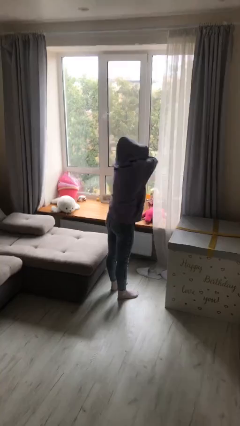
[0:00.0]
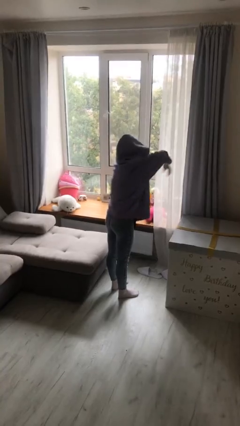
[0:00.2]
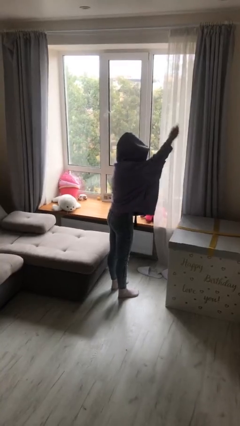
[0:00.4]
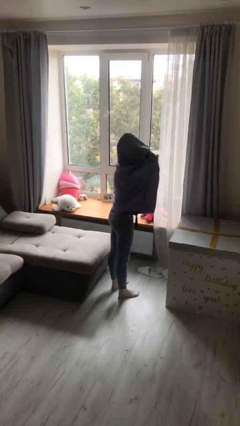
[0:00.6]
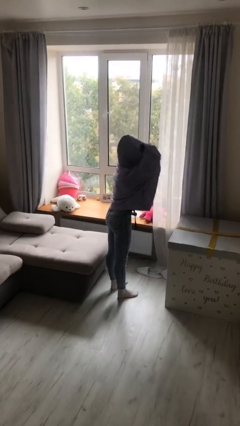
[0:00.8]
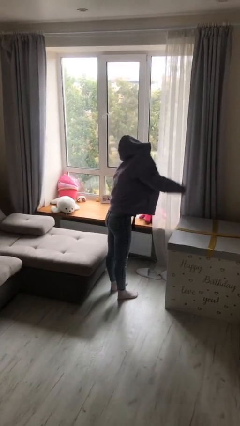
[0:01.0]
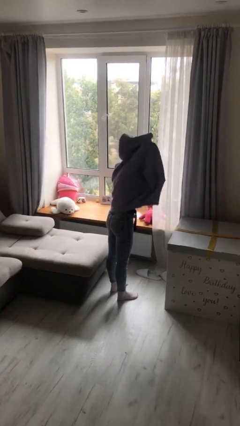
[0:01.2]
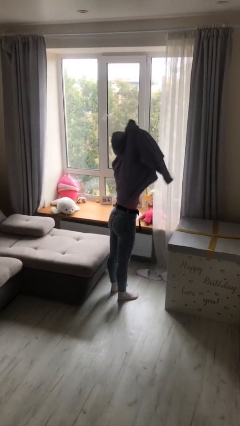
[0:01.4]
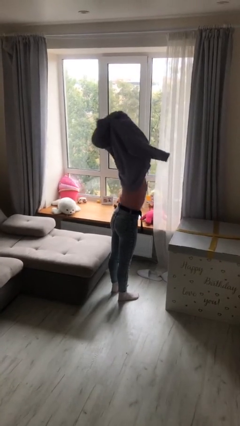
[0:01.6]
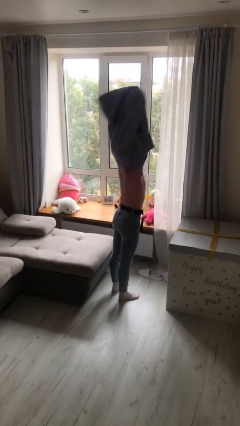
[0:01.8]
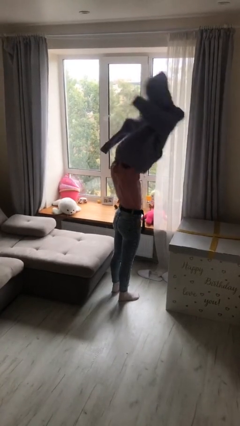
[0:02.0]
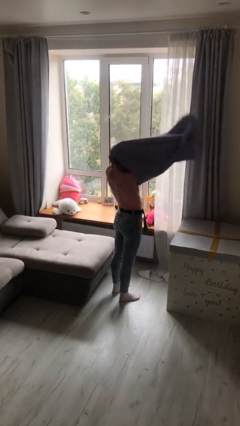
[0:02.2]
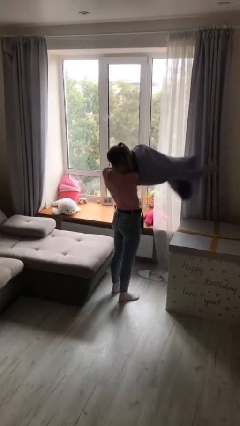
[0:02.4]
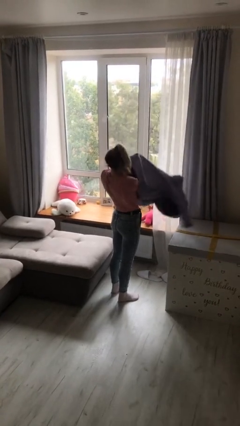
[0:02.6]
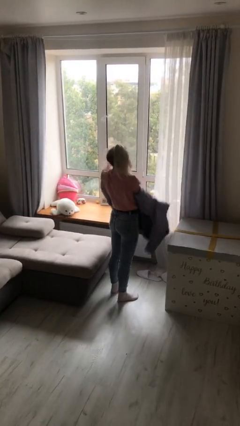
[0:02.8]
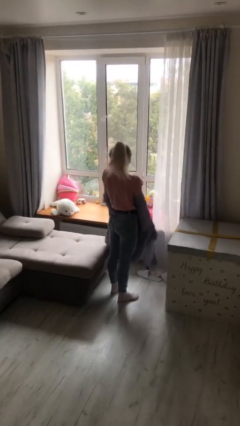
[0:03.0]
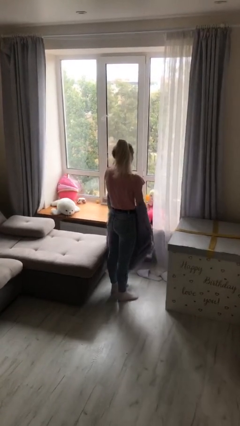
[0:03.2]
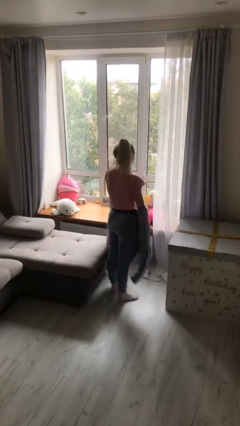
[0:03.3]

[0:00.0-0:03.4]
person takes off hoodie

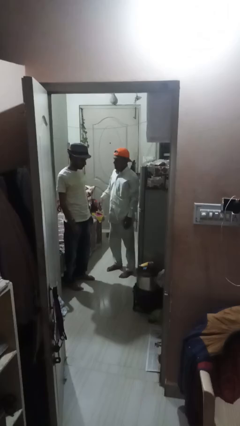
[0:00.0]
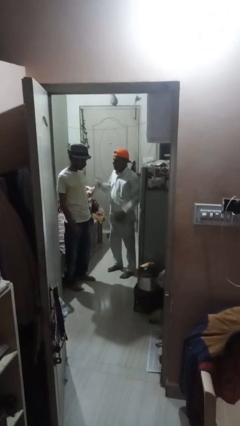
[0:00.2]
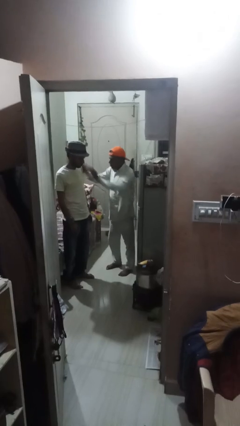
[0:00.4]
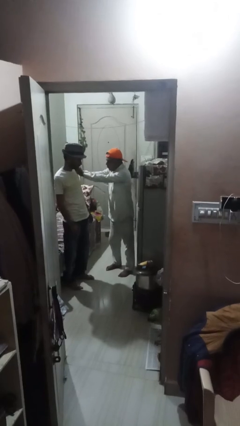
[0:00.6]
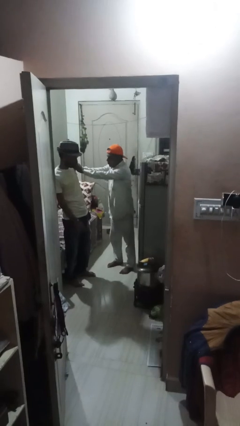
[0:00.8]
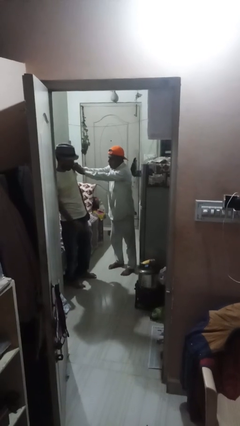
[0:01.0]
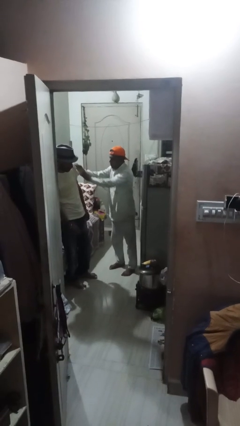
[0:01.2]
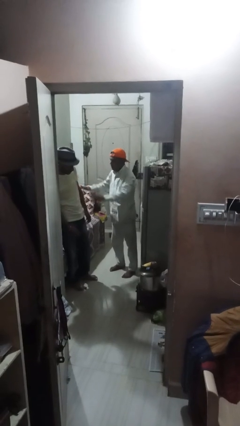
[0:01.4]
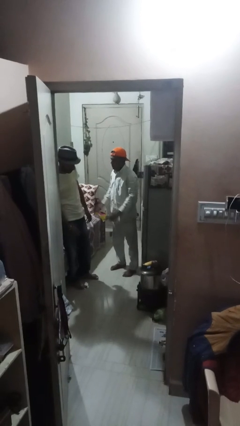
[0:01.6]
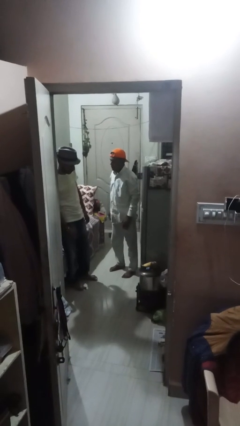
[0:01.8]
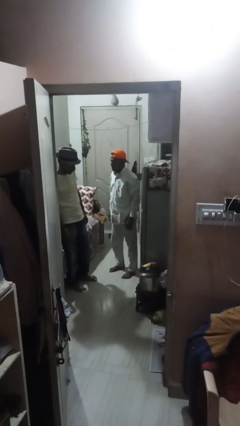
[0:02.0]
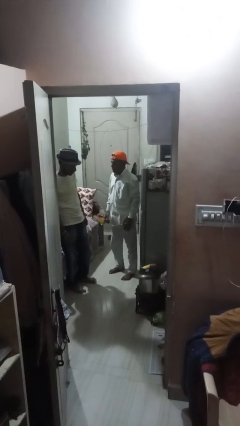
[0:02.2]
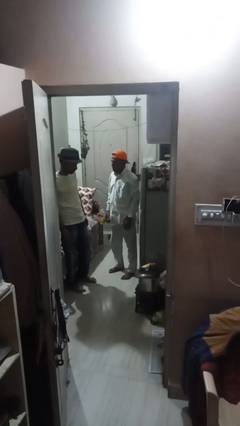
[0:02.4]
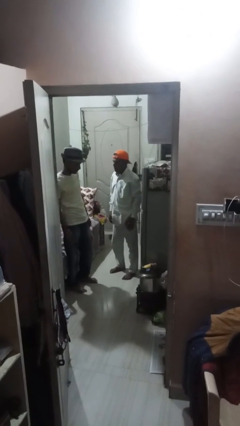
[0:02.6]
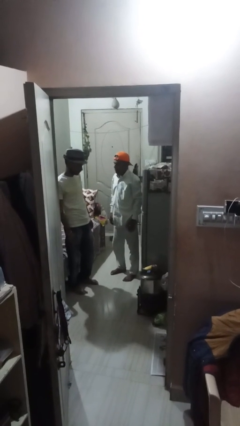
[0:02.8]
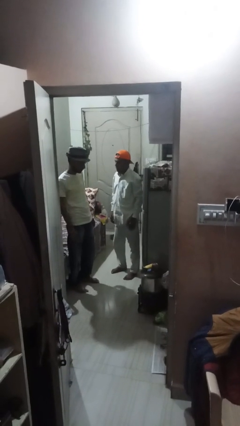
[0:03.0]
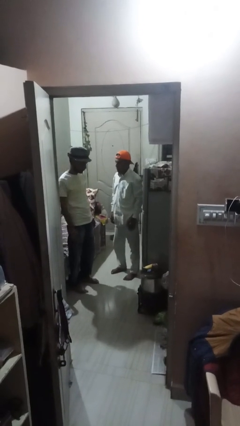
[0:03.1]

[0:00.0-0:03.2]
person shoves person

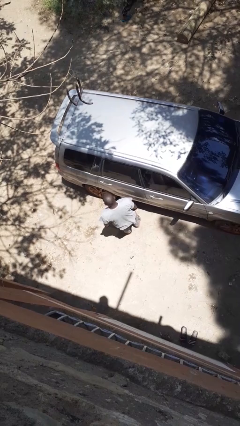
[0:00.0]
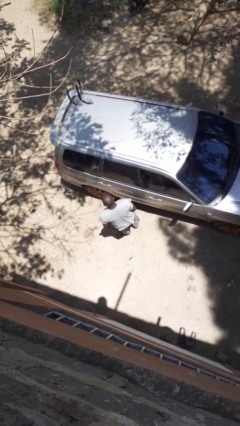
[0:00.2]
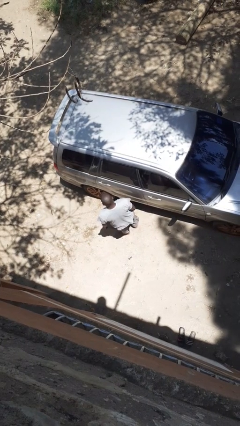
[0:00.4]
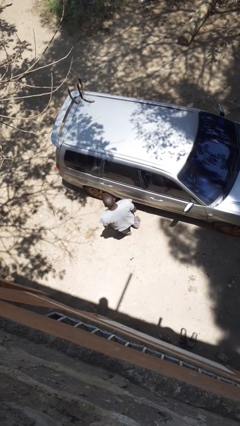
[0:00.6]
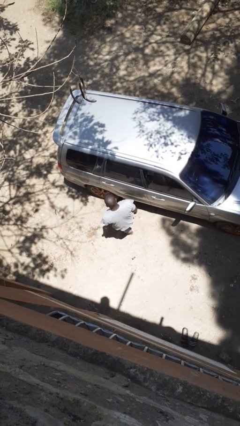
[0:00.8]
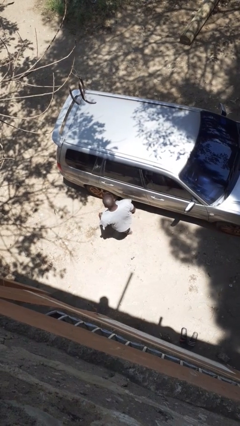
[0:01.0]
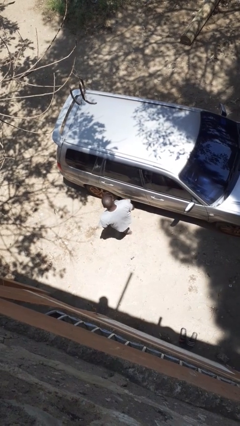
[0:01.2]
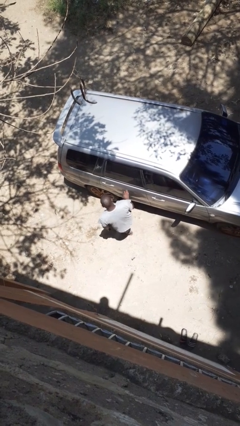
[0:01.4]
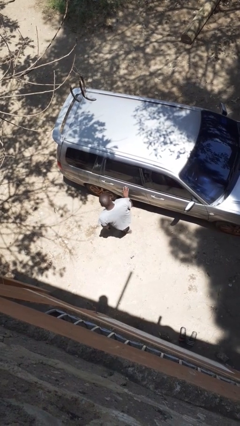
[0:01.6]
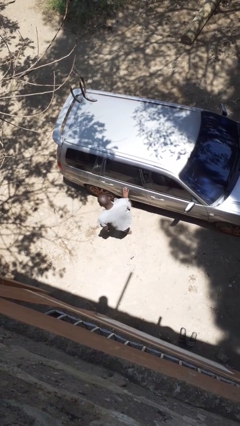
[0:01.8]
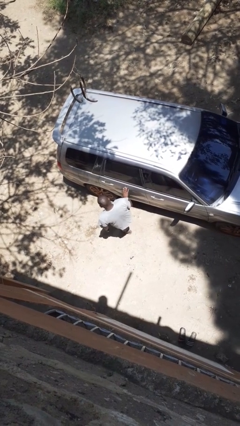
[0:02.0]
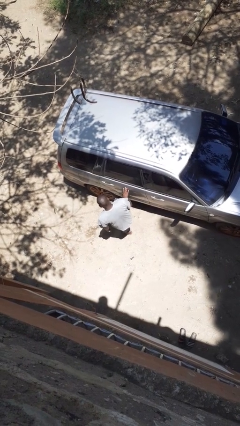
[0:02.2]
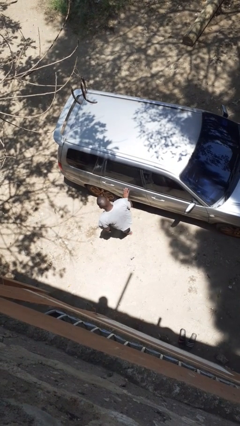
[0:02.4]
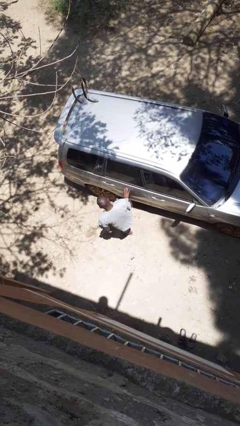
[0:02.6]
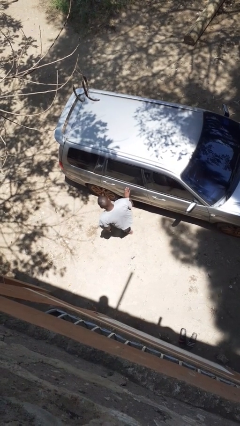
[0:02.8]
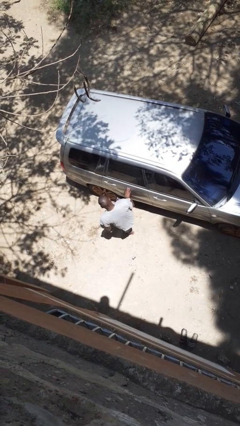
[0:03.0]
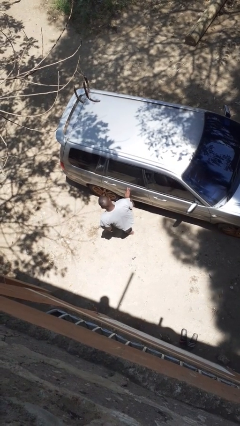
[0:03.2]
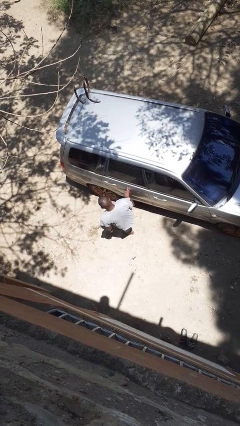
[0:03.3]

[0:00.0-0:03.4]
person kicks car tires

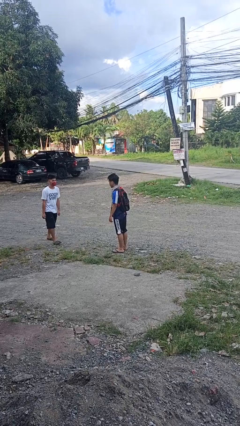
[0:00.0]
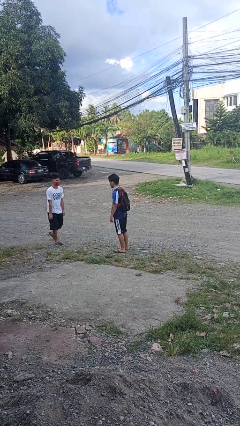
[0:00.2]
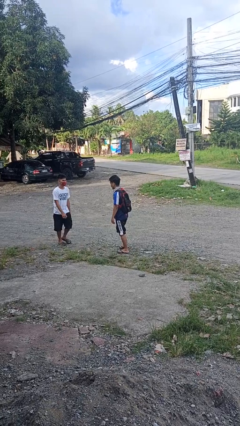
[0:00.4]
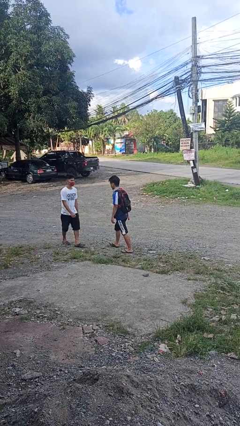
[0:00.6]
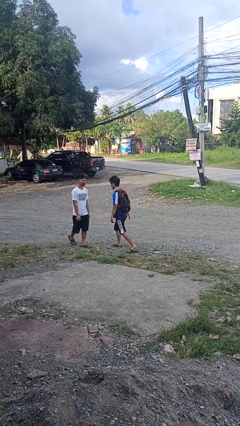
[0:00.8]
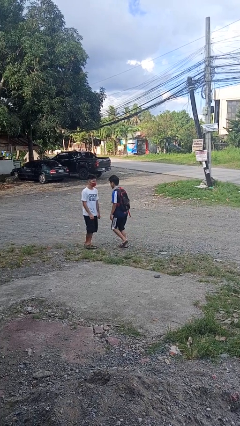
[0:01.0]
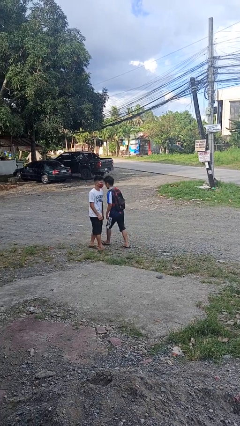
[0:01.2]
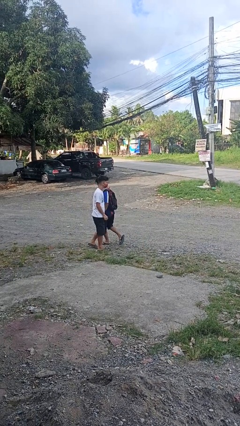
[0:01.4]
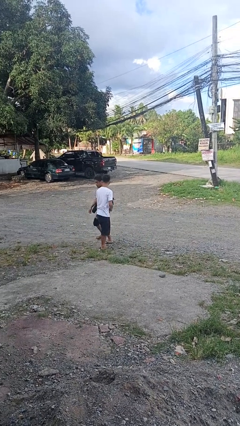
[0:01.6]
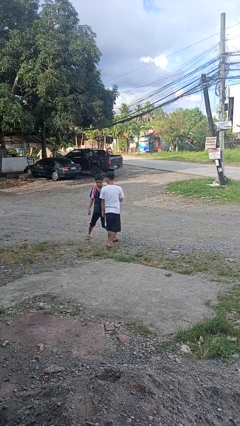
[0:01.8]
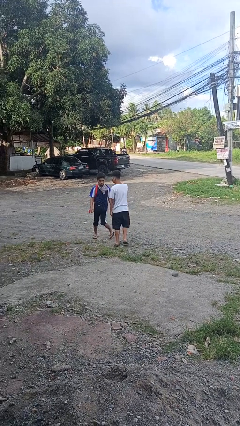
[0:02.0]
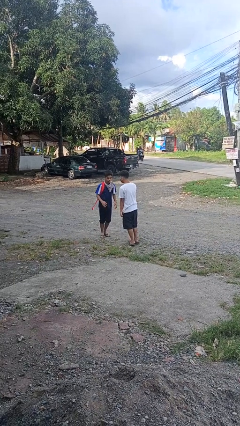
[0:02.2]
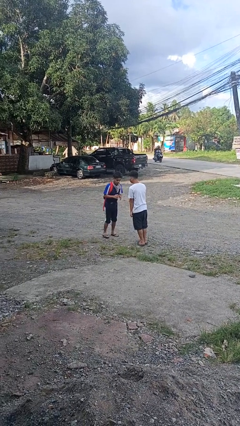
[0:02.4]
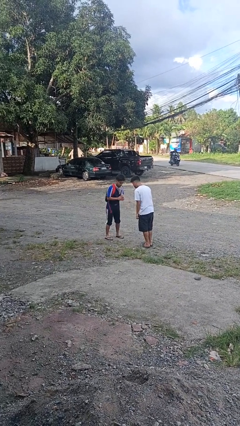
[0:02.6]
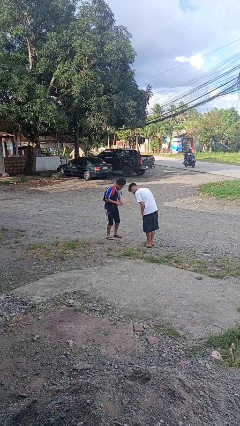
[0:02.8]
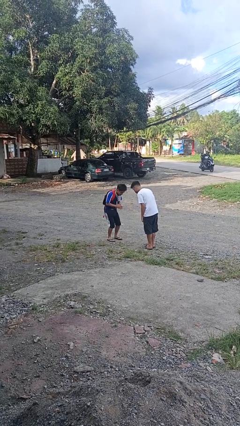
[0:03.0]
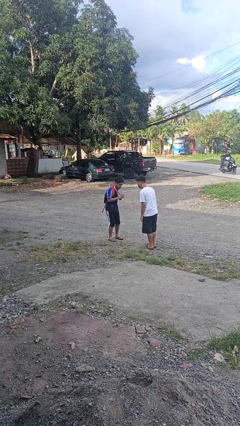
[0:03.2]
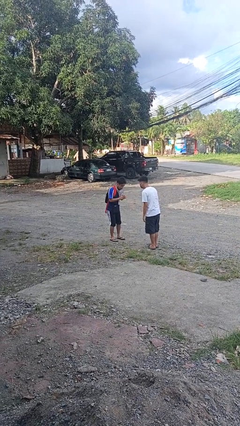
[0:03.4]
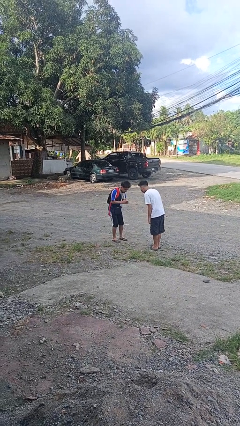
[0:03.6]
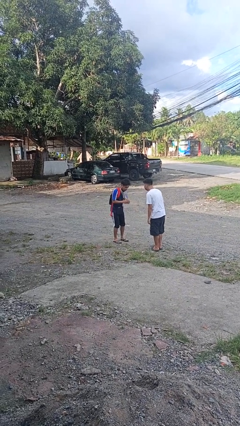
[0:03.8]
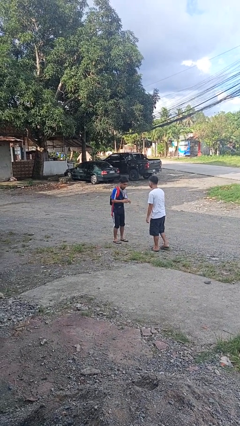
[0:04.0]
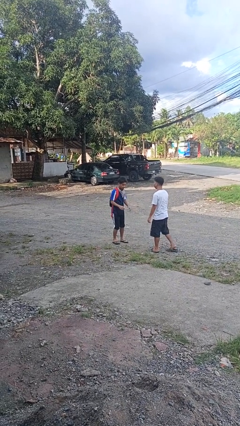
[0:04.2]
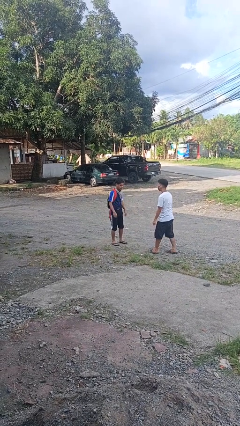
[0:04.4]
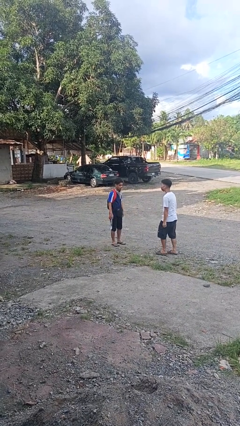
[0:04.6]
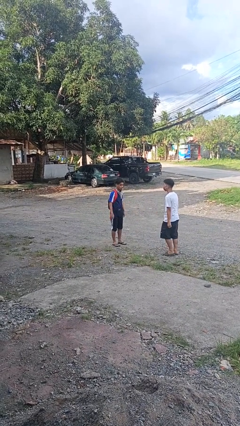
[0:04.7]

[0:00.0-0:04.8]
person bumps into person

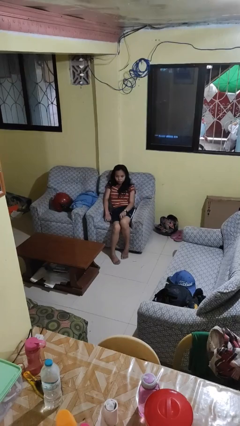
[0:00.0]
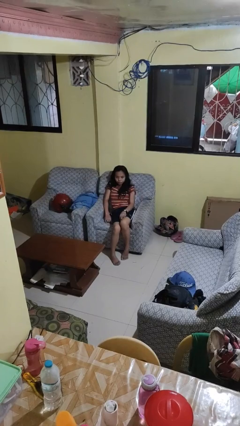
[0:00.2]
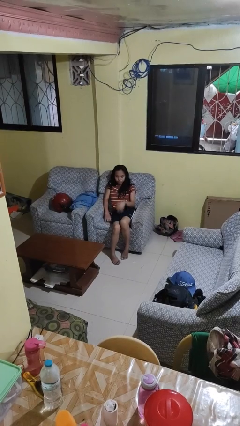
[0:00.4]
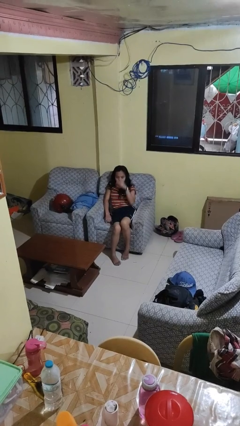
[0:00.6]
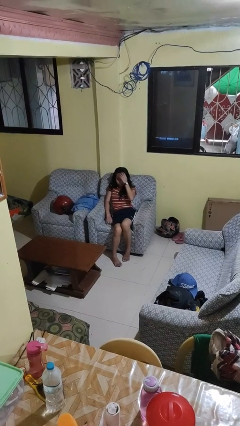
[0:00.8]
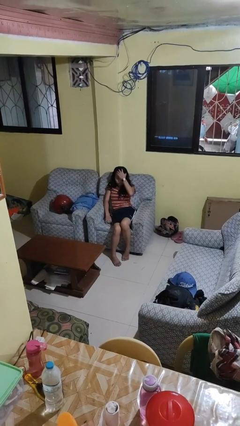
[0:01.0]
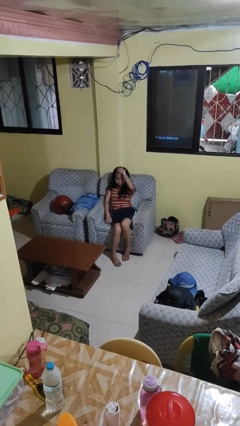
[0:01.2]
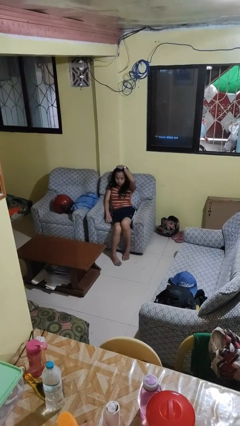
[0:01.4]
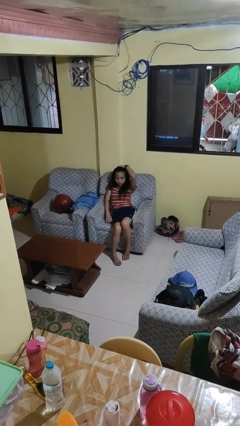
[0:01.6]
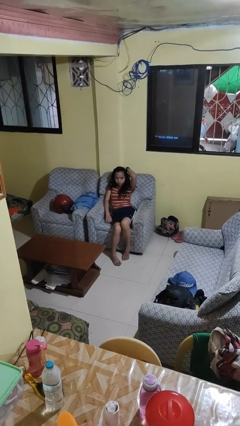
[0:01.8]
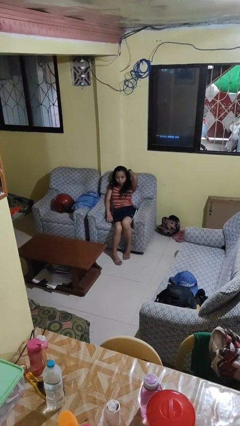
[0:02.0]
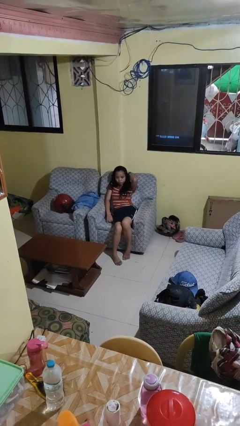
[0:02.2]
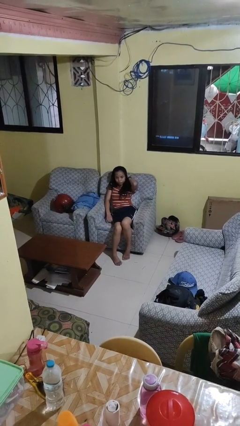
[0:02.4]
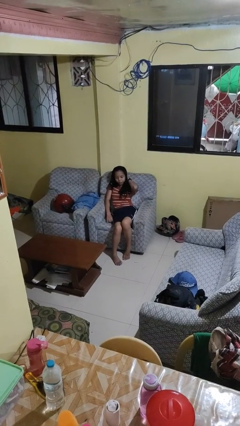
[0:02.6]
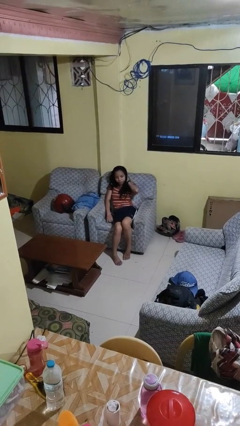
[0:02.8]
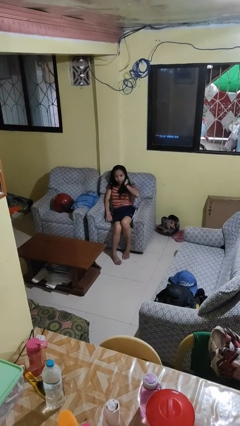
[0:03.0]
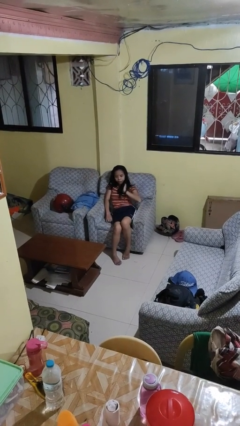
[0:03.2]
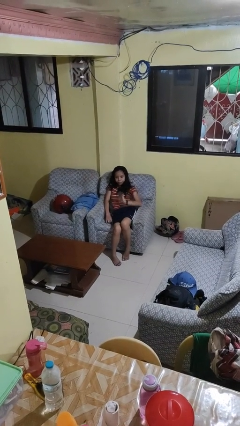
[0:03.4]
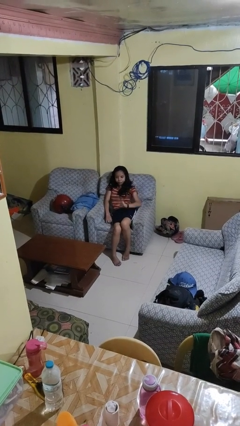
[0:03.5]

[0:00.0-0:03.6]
person strokes hair
